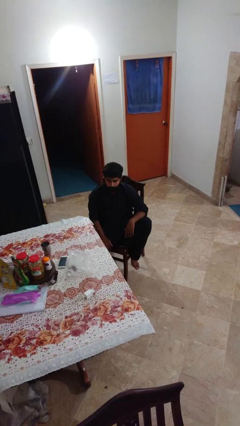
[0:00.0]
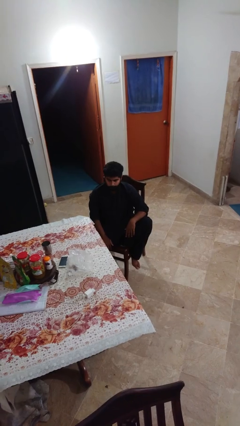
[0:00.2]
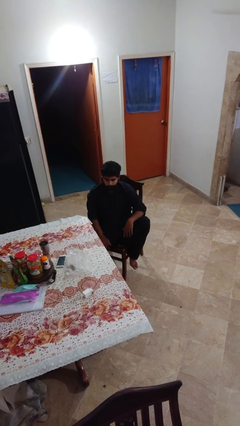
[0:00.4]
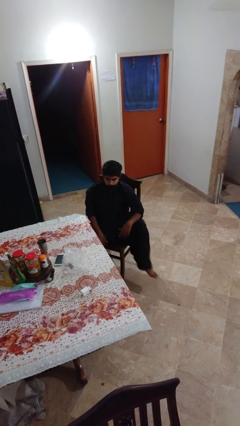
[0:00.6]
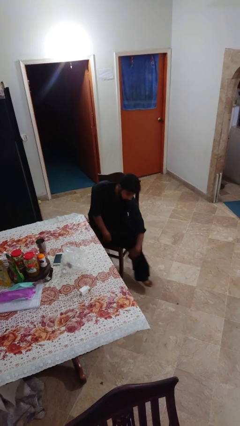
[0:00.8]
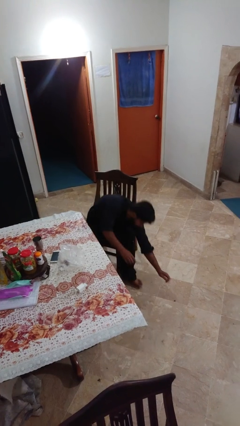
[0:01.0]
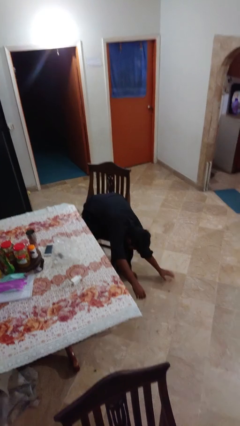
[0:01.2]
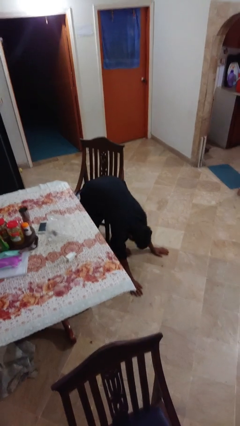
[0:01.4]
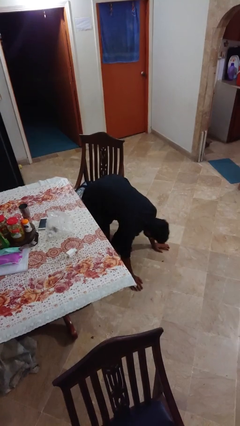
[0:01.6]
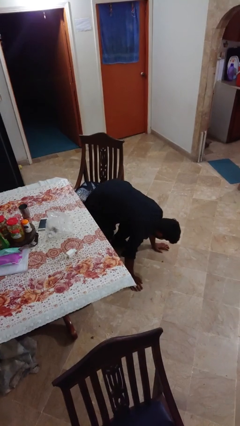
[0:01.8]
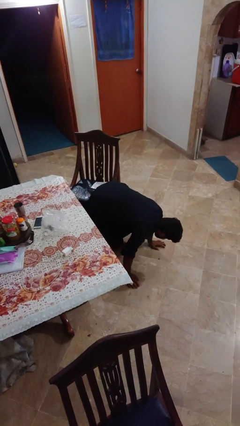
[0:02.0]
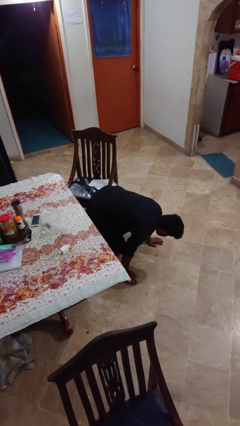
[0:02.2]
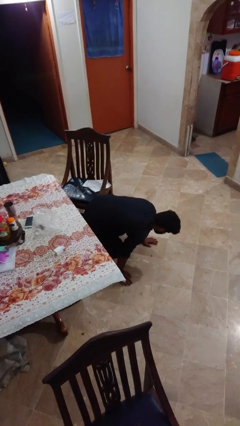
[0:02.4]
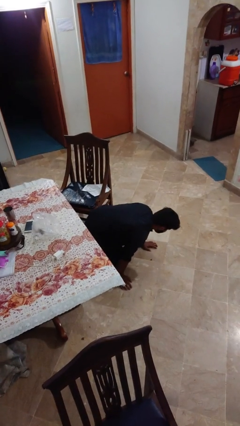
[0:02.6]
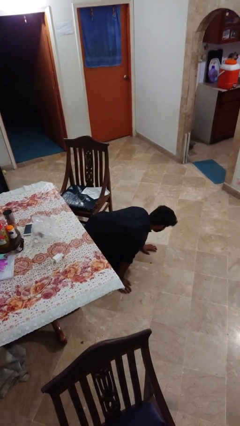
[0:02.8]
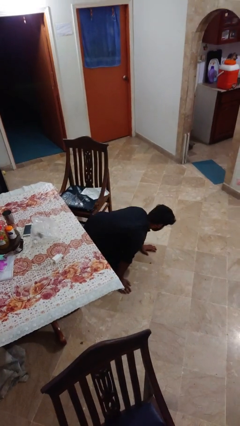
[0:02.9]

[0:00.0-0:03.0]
person falls from chair

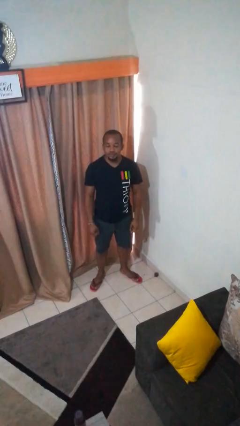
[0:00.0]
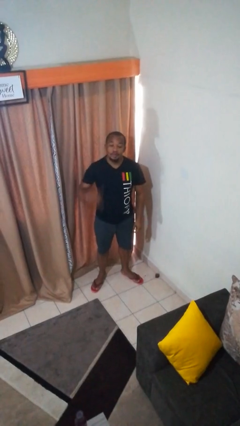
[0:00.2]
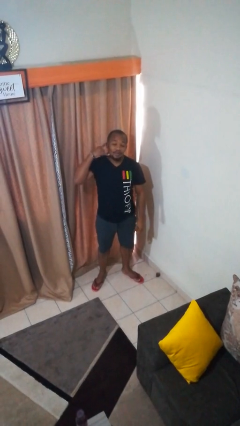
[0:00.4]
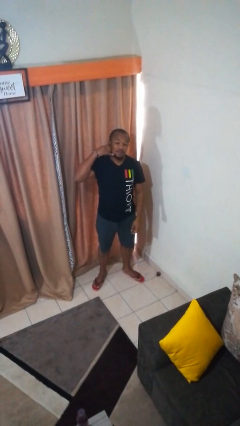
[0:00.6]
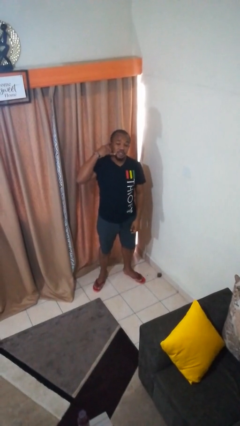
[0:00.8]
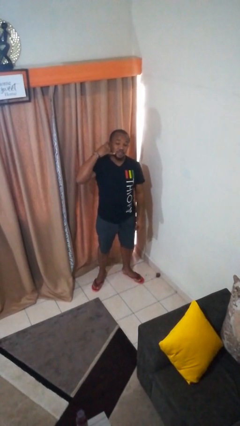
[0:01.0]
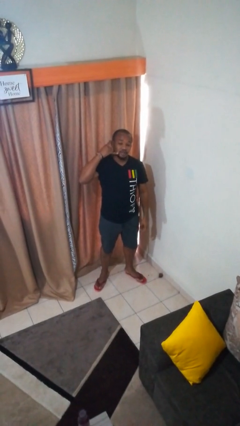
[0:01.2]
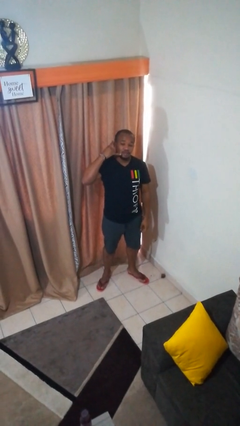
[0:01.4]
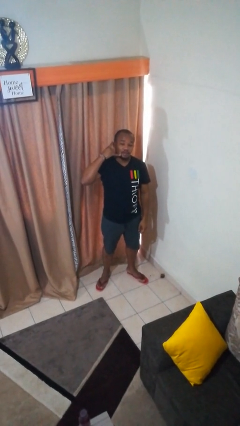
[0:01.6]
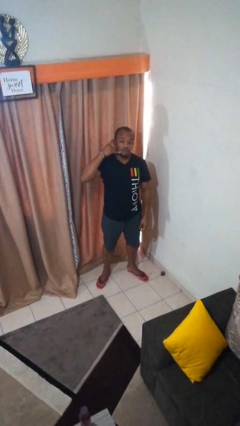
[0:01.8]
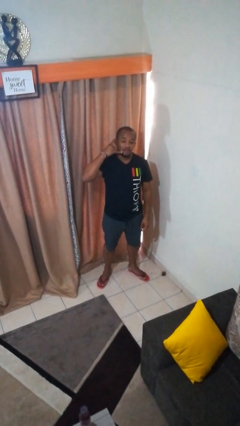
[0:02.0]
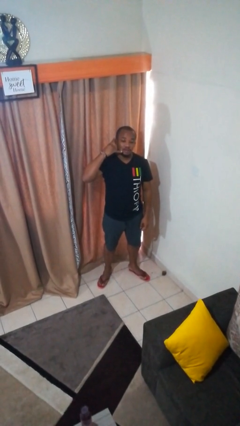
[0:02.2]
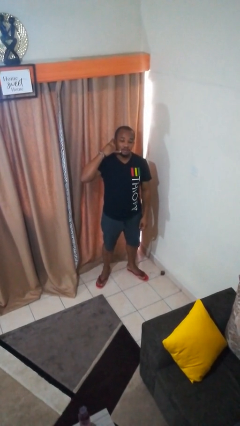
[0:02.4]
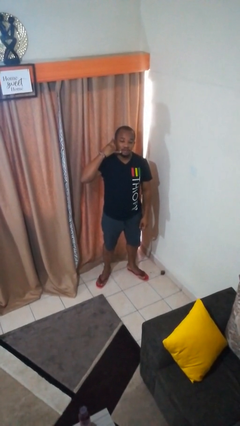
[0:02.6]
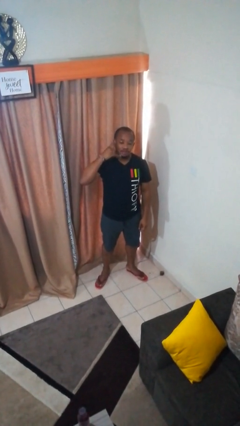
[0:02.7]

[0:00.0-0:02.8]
person gestures call me

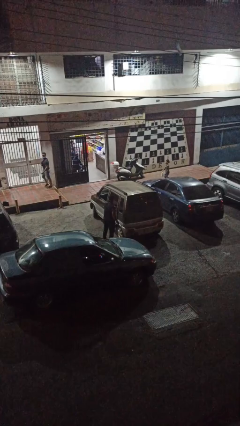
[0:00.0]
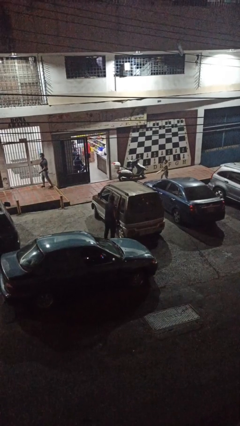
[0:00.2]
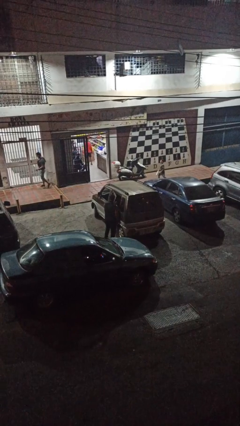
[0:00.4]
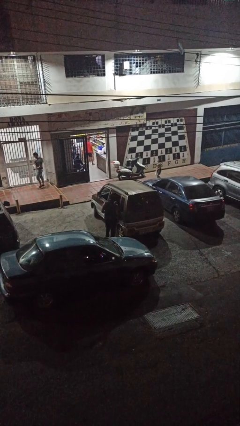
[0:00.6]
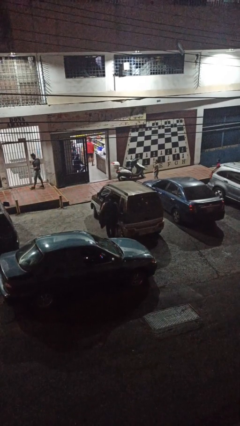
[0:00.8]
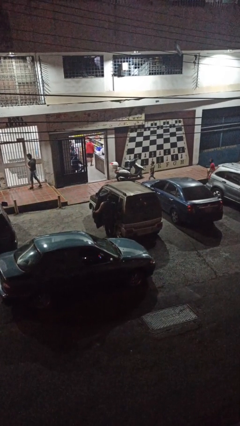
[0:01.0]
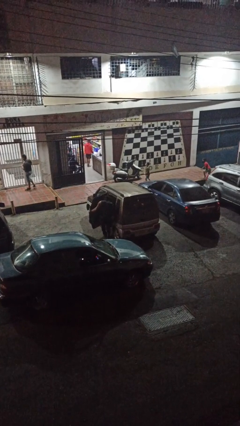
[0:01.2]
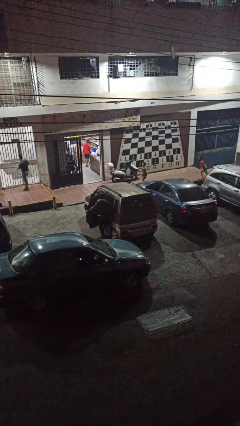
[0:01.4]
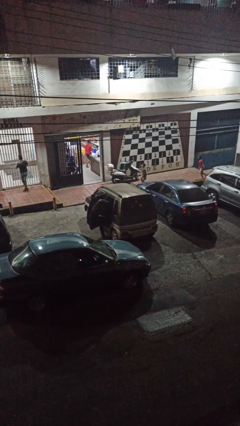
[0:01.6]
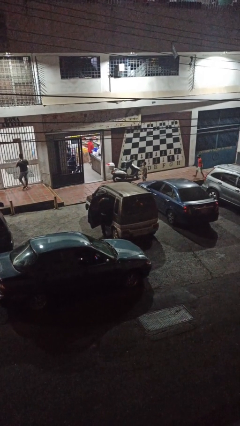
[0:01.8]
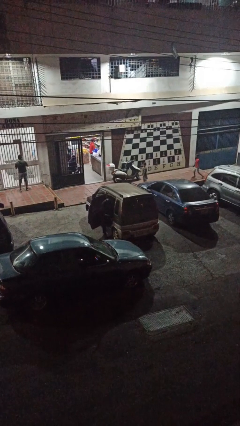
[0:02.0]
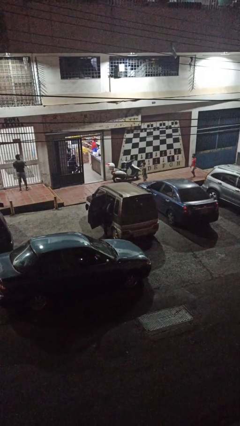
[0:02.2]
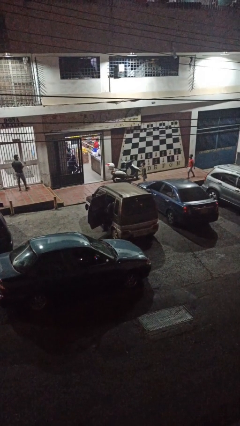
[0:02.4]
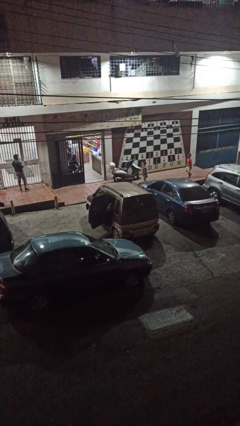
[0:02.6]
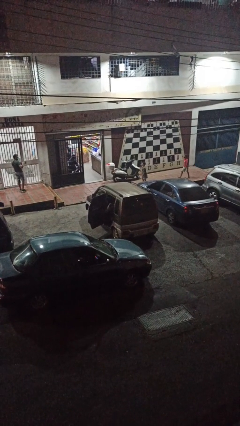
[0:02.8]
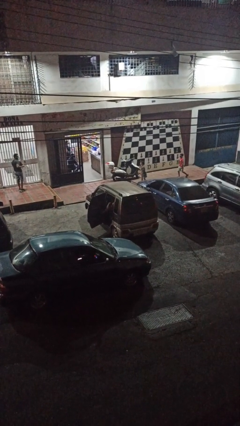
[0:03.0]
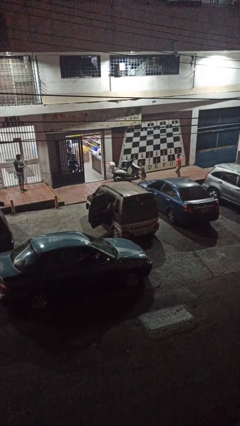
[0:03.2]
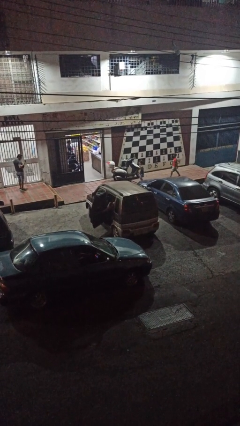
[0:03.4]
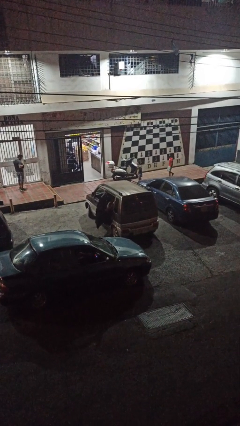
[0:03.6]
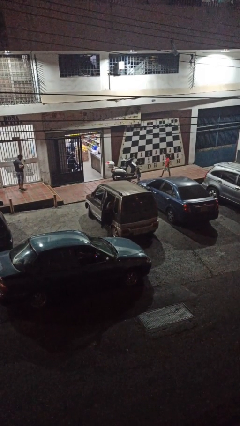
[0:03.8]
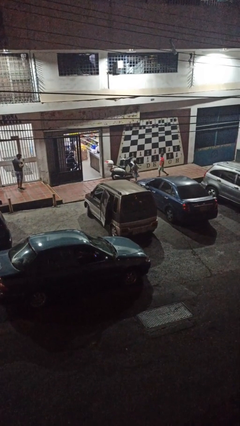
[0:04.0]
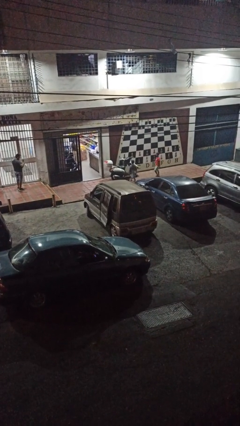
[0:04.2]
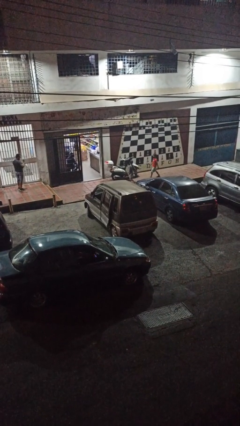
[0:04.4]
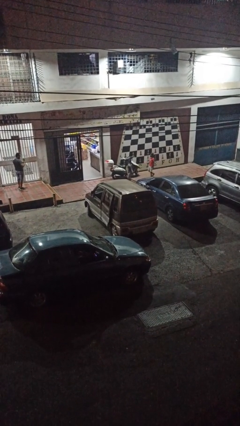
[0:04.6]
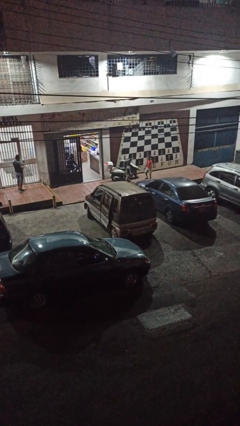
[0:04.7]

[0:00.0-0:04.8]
car picks up person

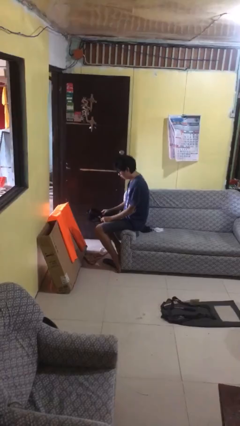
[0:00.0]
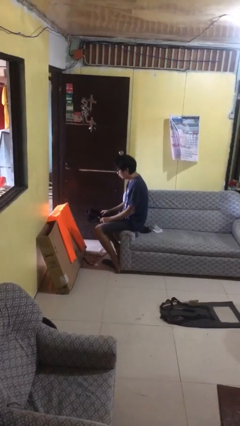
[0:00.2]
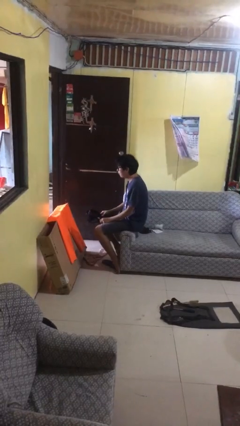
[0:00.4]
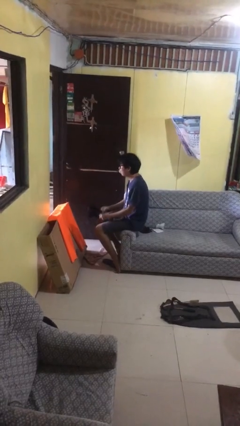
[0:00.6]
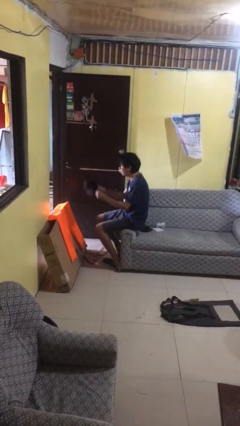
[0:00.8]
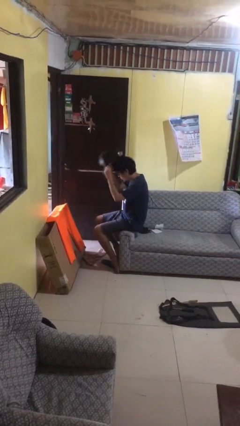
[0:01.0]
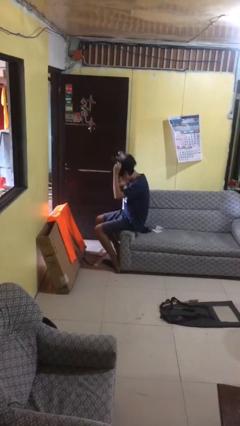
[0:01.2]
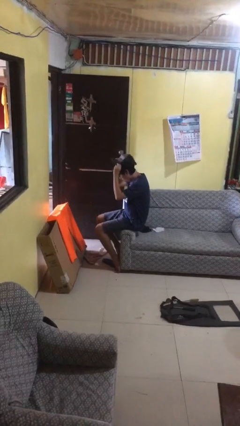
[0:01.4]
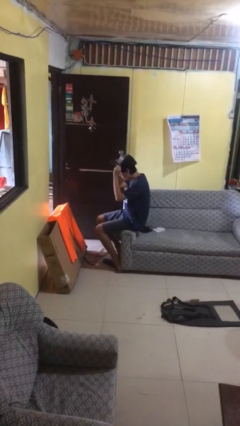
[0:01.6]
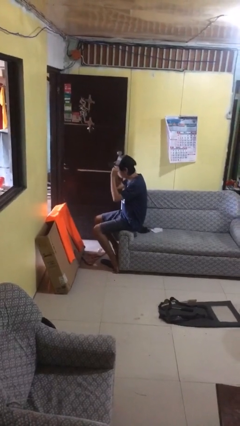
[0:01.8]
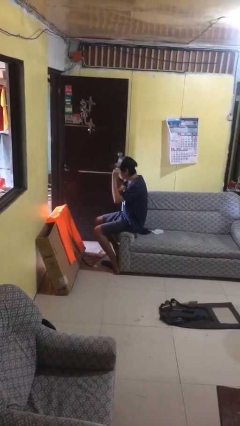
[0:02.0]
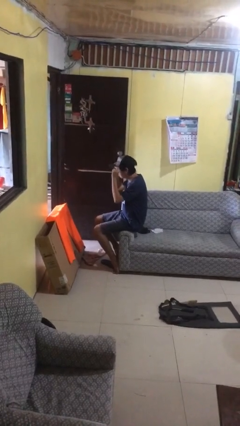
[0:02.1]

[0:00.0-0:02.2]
person puts on hat

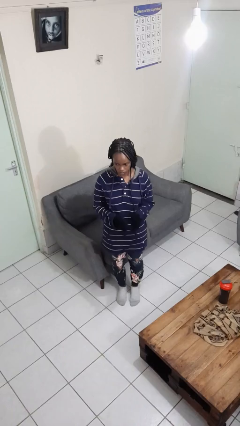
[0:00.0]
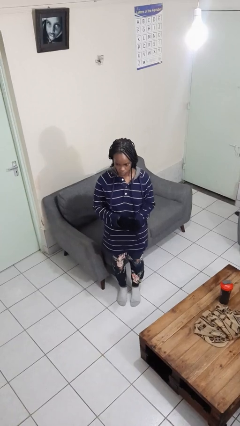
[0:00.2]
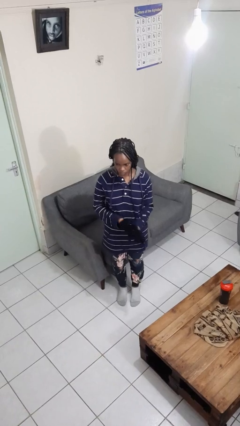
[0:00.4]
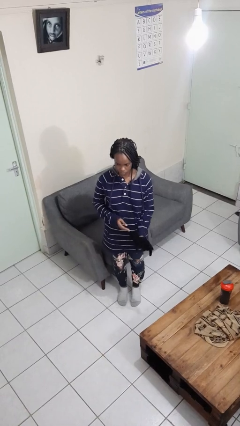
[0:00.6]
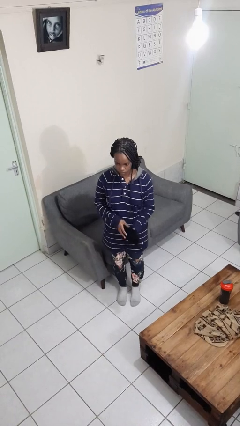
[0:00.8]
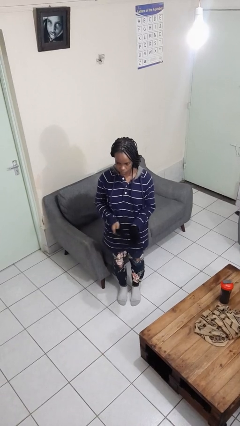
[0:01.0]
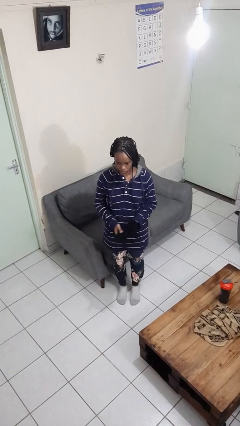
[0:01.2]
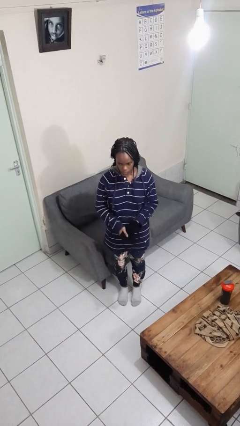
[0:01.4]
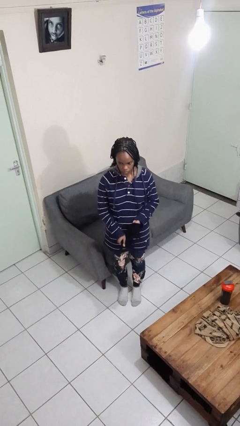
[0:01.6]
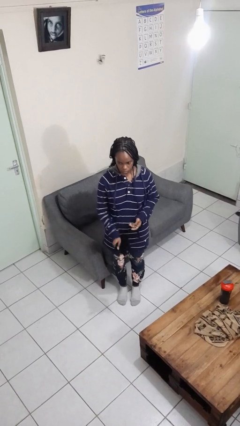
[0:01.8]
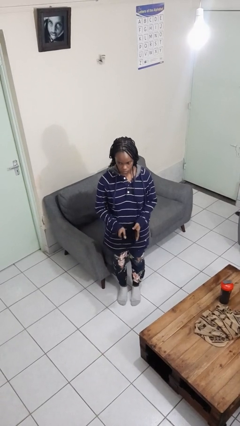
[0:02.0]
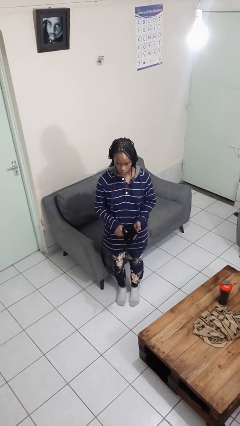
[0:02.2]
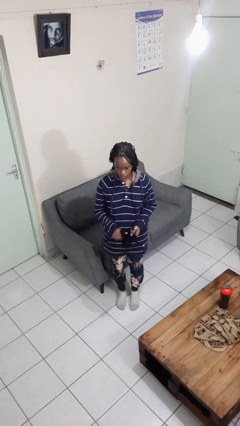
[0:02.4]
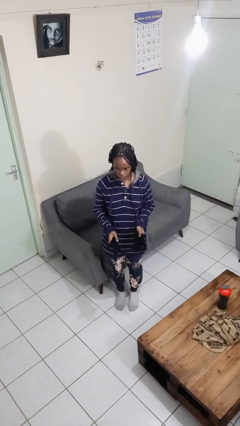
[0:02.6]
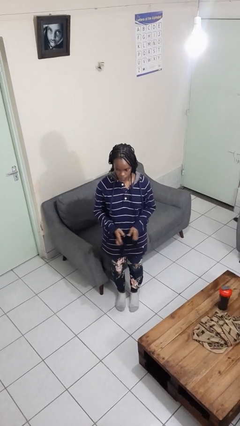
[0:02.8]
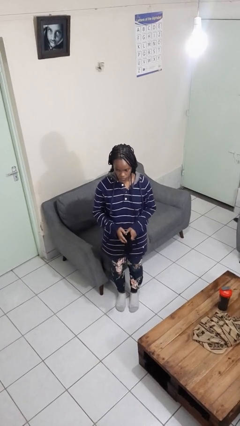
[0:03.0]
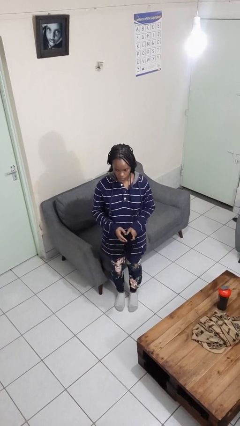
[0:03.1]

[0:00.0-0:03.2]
person takes off gloves

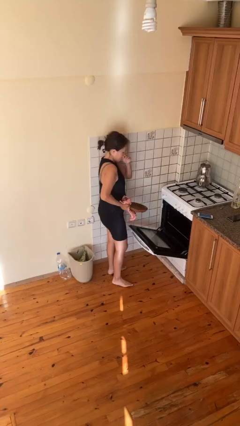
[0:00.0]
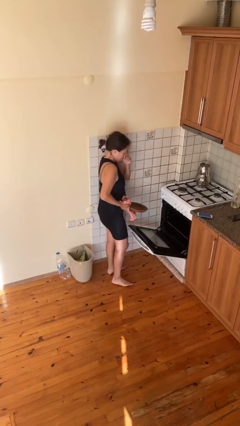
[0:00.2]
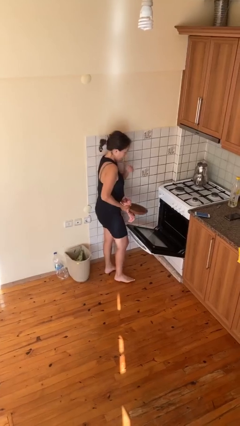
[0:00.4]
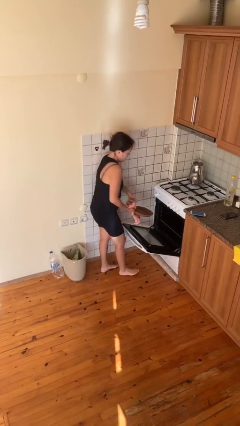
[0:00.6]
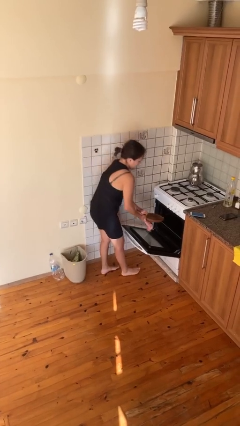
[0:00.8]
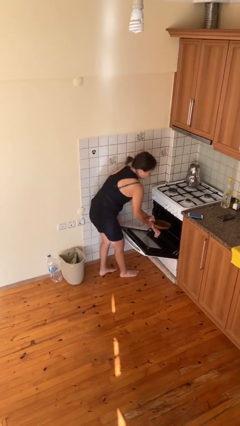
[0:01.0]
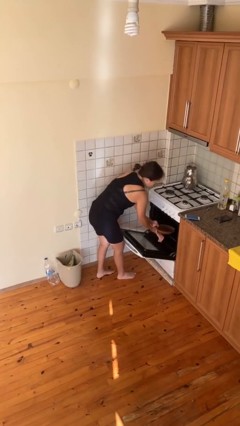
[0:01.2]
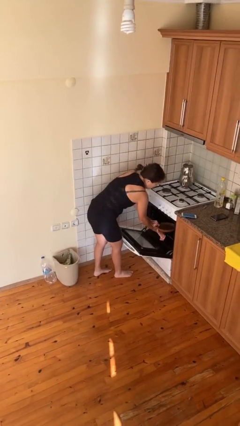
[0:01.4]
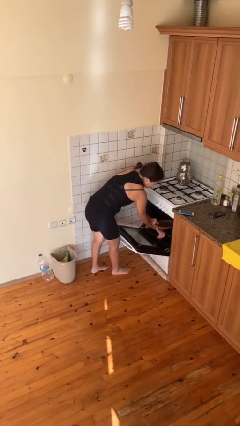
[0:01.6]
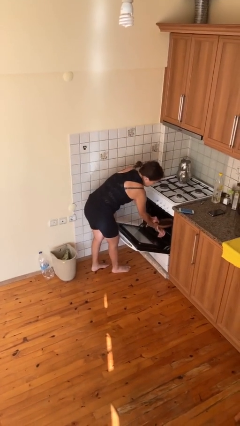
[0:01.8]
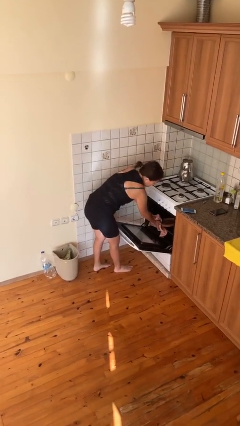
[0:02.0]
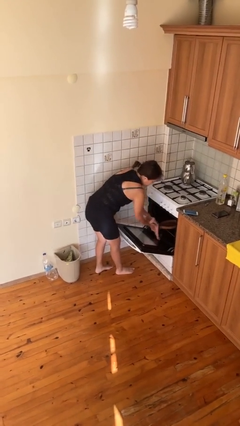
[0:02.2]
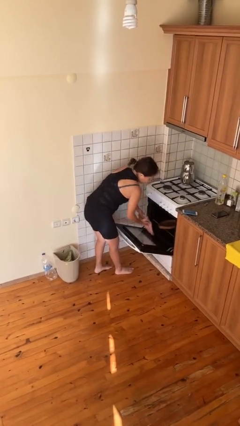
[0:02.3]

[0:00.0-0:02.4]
person puts object into oven
